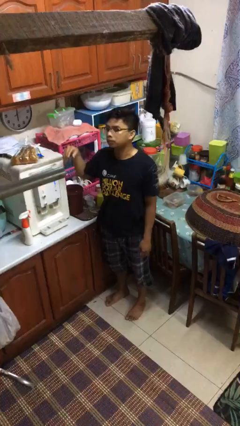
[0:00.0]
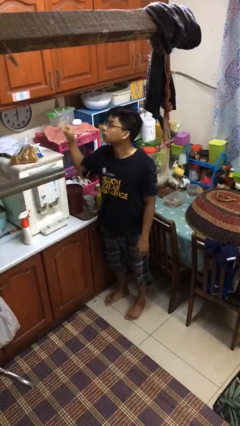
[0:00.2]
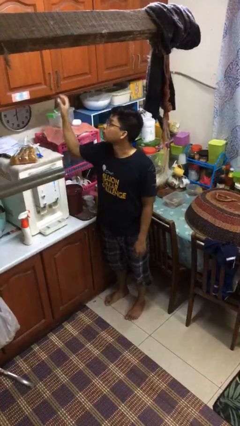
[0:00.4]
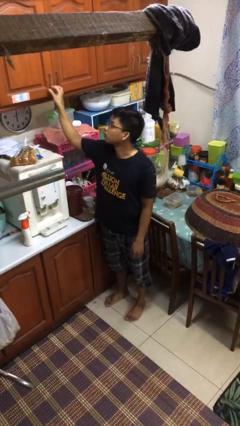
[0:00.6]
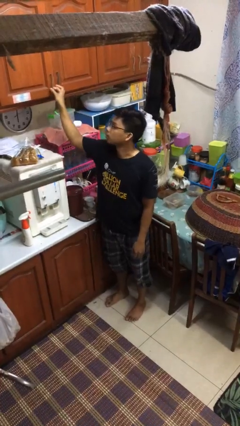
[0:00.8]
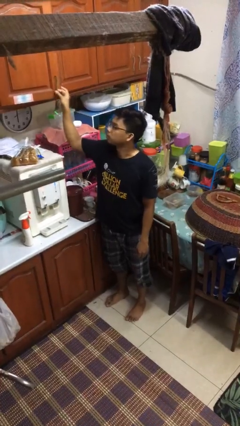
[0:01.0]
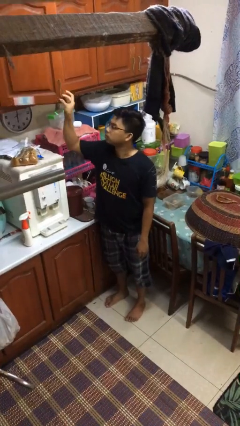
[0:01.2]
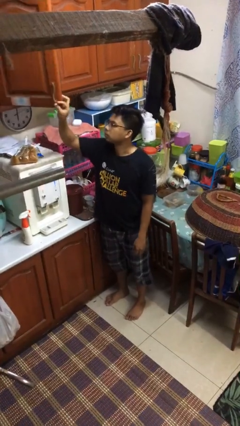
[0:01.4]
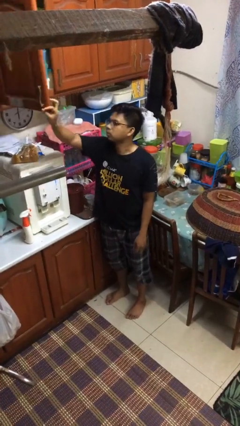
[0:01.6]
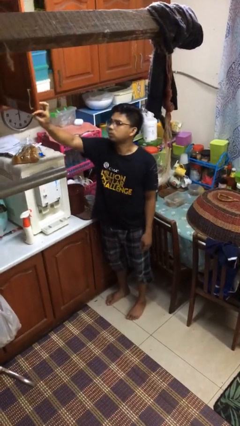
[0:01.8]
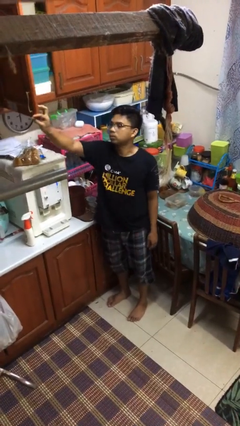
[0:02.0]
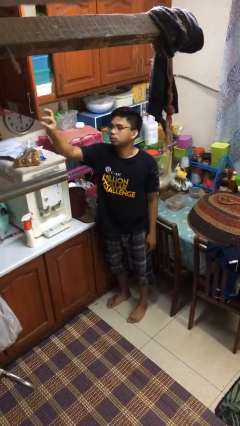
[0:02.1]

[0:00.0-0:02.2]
person opens kitchen drawer

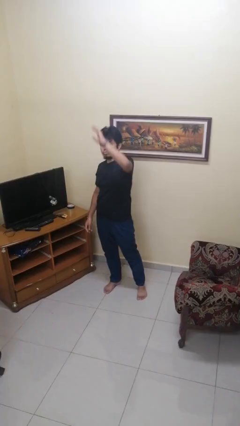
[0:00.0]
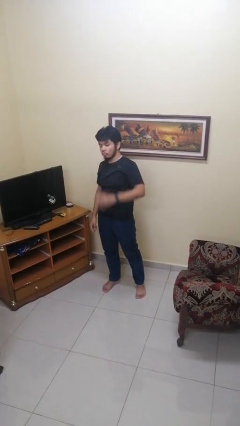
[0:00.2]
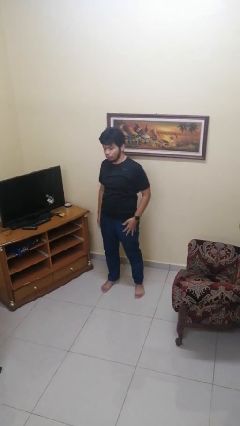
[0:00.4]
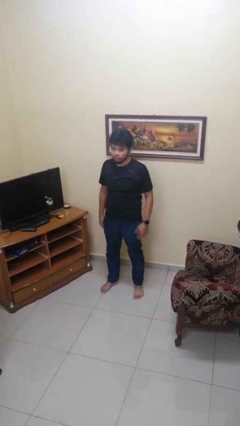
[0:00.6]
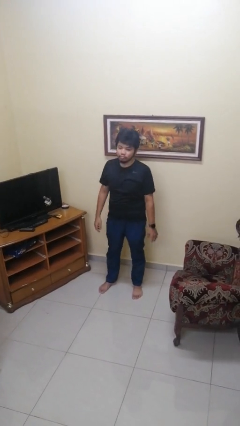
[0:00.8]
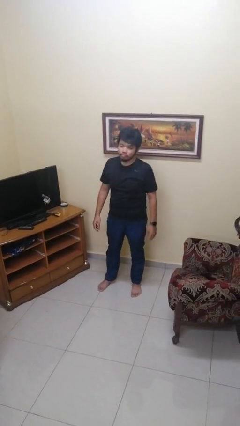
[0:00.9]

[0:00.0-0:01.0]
person gestures lower hand

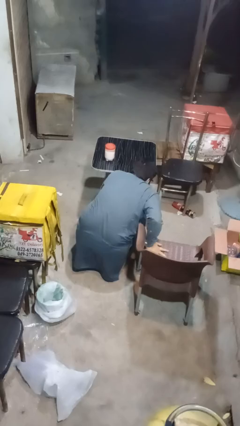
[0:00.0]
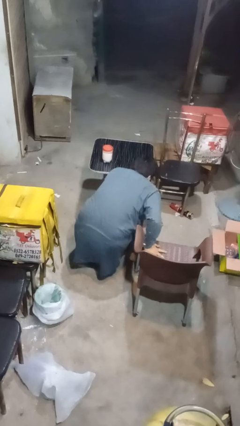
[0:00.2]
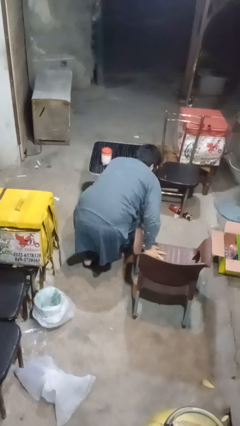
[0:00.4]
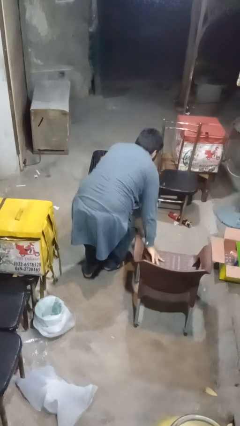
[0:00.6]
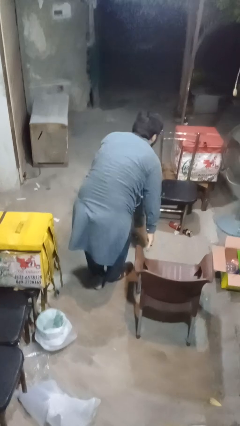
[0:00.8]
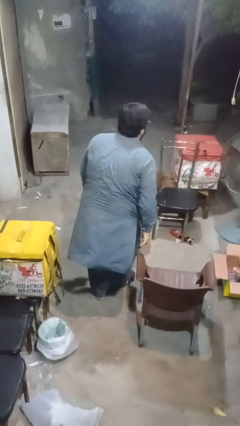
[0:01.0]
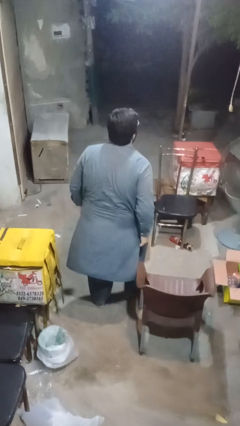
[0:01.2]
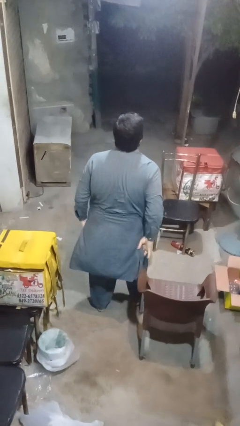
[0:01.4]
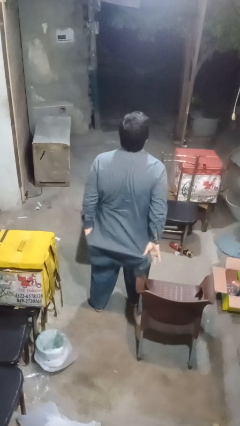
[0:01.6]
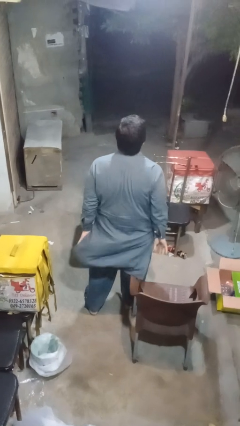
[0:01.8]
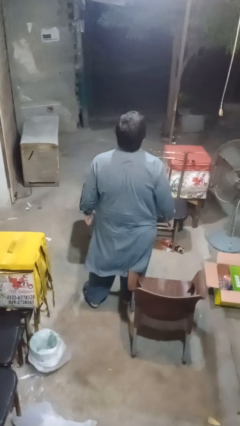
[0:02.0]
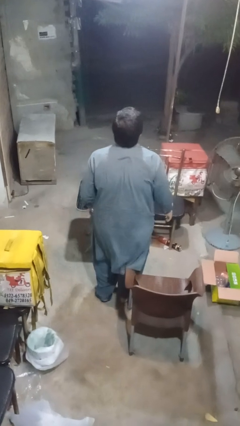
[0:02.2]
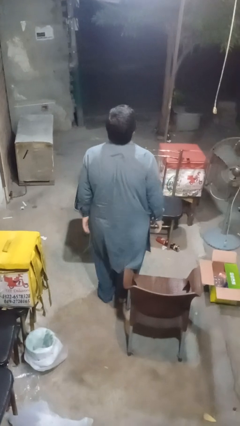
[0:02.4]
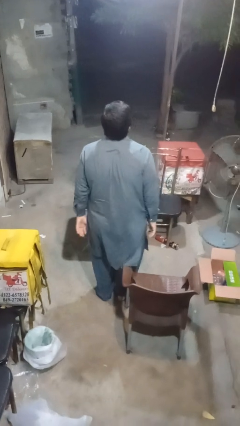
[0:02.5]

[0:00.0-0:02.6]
person stands up from floor

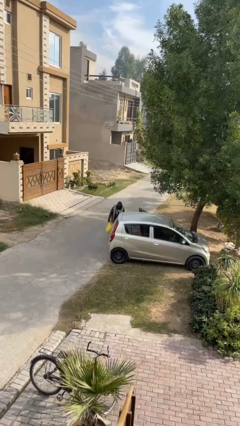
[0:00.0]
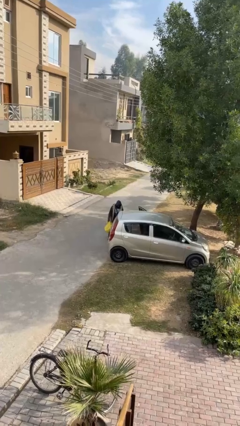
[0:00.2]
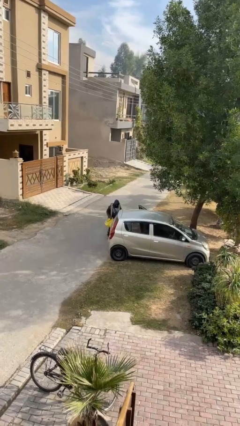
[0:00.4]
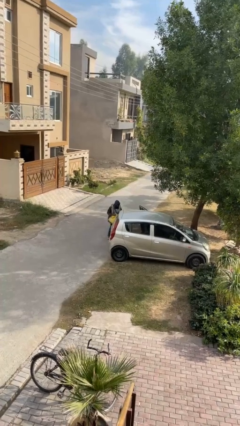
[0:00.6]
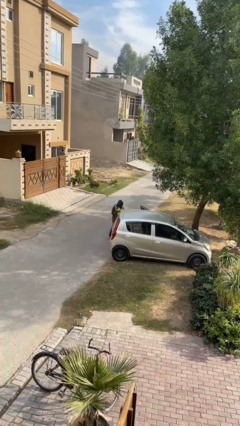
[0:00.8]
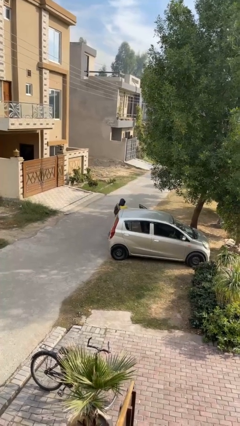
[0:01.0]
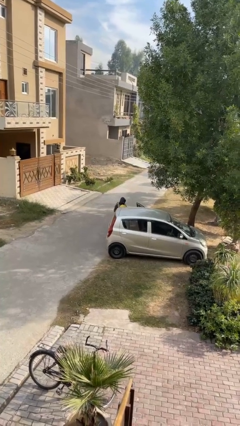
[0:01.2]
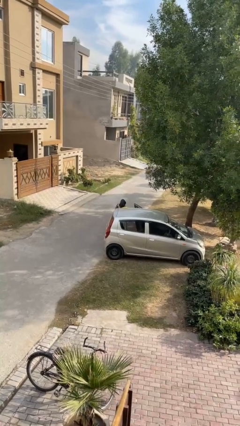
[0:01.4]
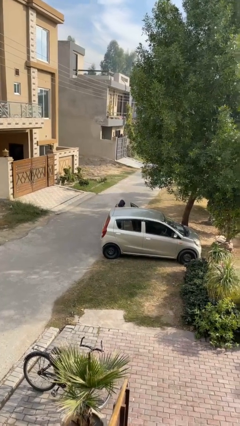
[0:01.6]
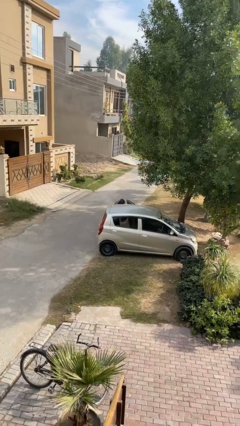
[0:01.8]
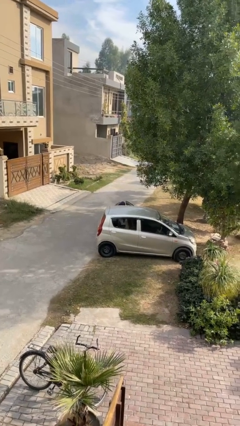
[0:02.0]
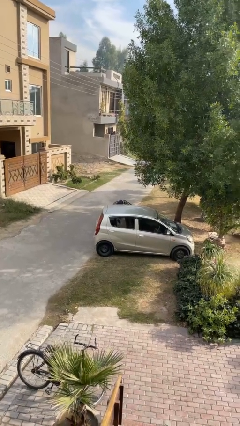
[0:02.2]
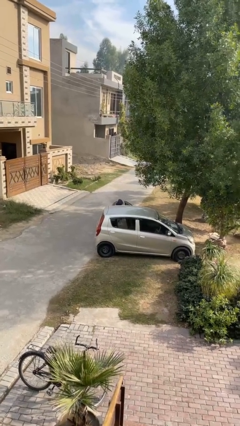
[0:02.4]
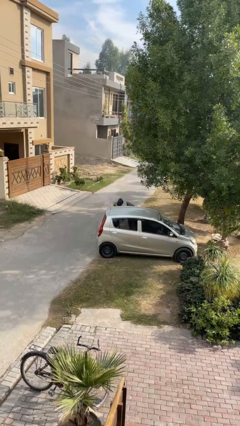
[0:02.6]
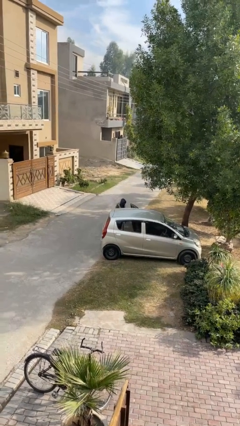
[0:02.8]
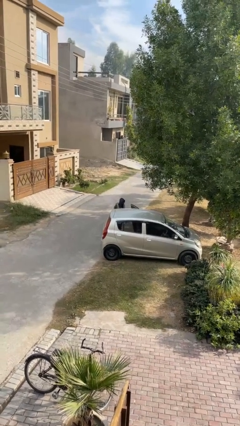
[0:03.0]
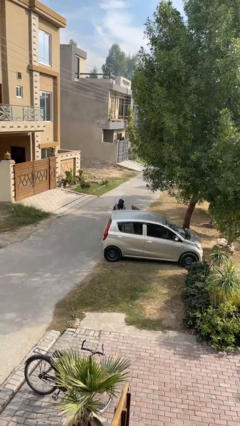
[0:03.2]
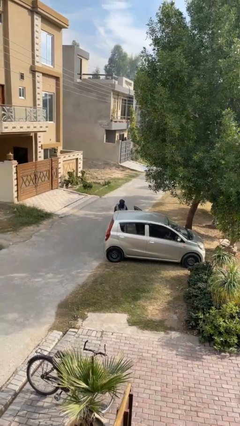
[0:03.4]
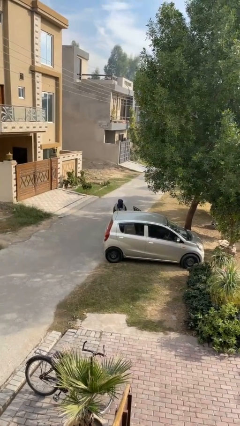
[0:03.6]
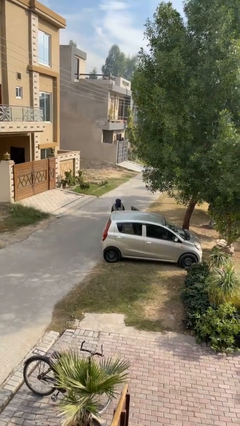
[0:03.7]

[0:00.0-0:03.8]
person loads car

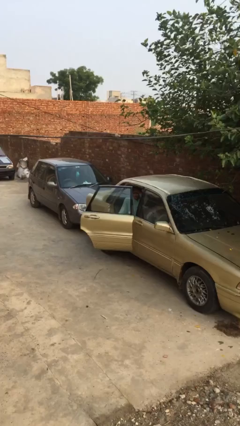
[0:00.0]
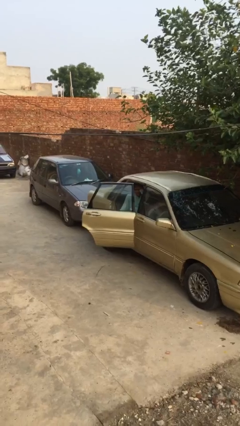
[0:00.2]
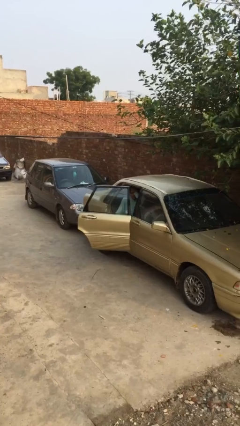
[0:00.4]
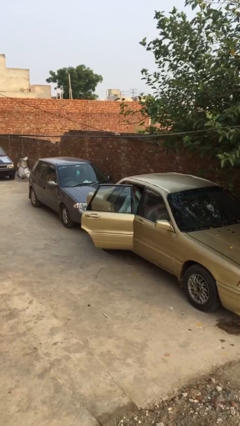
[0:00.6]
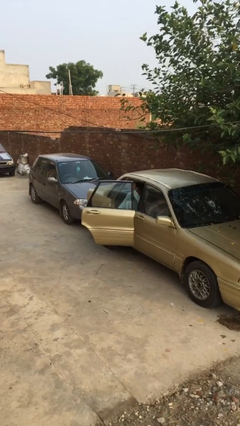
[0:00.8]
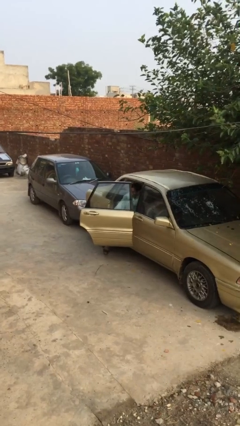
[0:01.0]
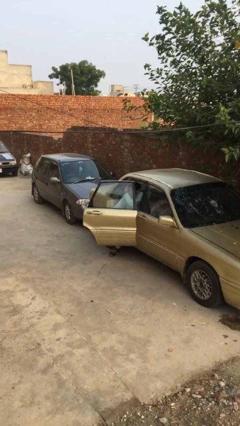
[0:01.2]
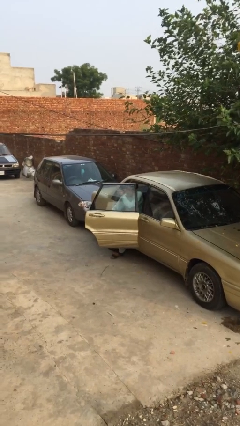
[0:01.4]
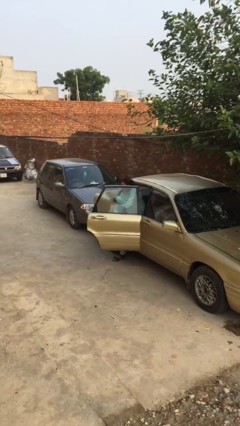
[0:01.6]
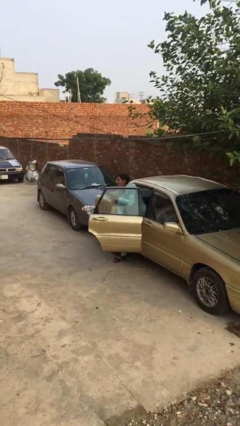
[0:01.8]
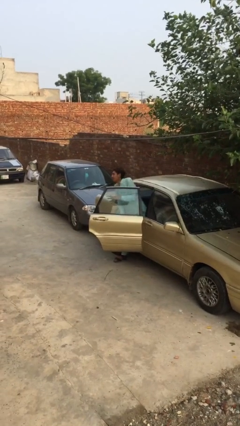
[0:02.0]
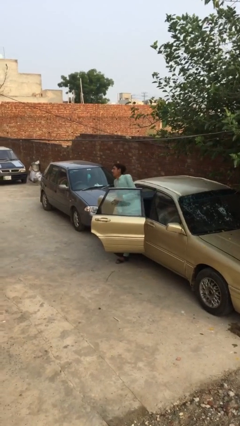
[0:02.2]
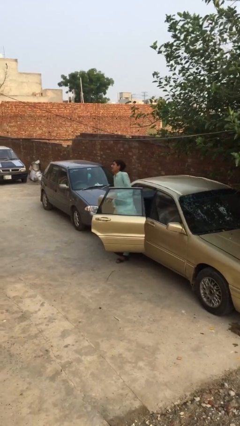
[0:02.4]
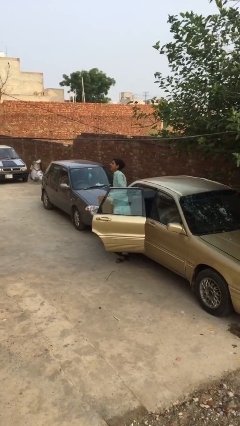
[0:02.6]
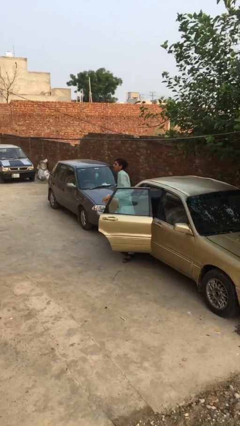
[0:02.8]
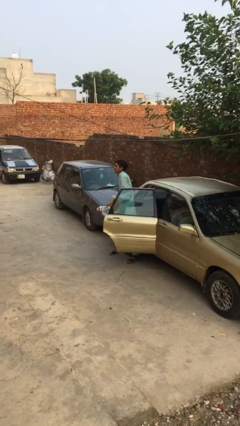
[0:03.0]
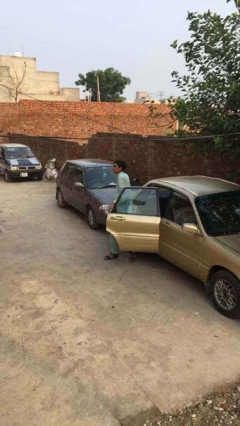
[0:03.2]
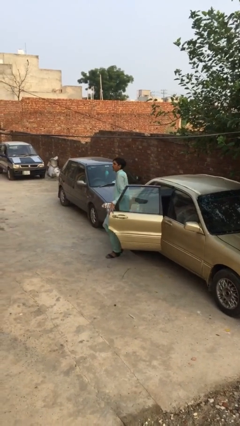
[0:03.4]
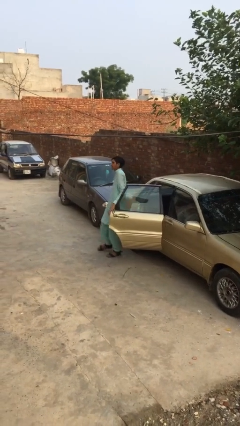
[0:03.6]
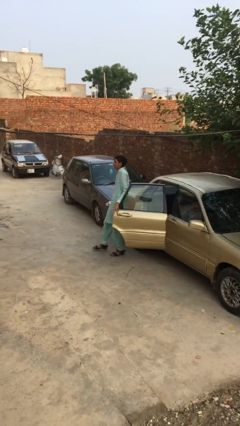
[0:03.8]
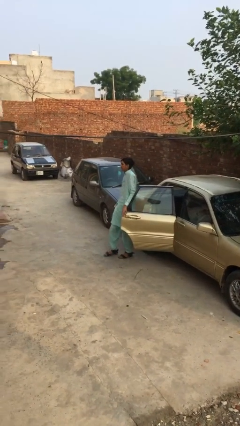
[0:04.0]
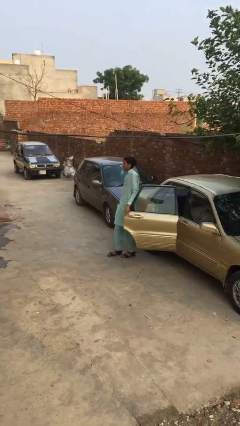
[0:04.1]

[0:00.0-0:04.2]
person exits car

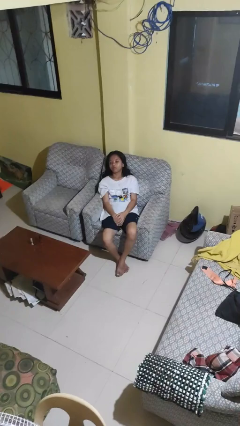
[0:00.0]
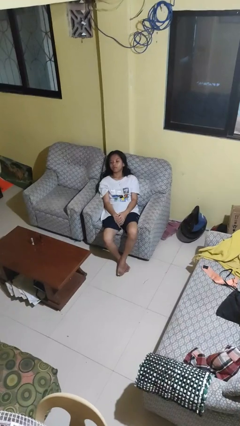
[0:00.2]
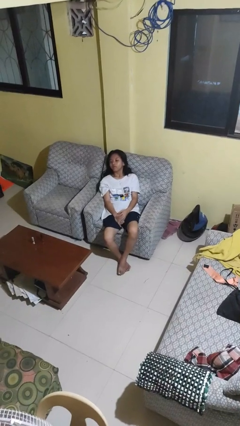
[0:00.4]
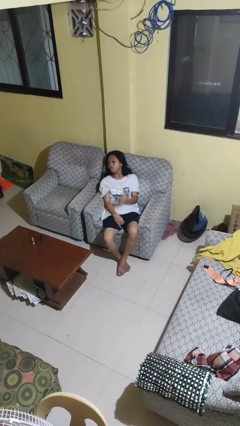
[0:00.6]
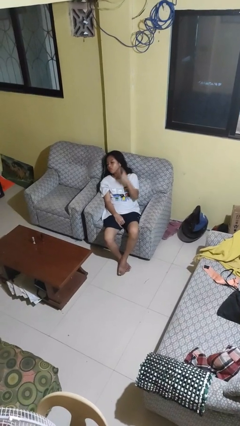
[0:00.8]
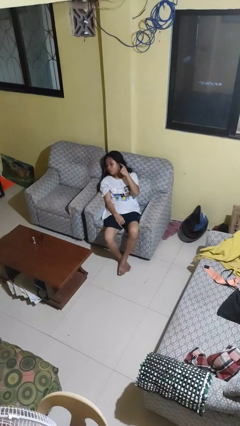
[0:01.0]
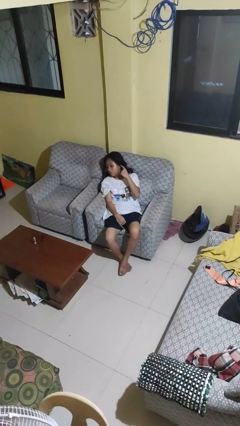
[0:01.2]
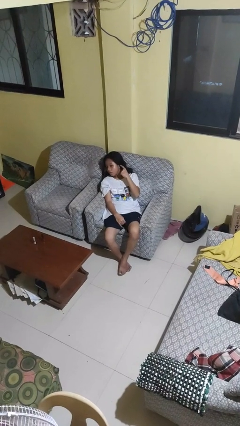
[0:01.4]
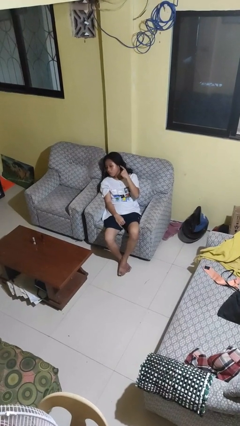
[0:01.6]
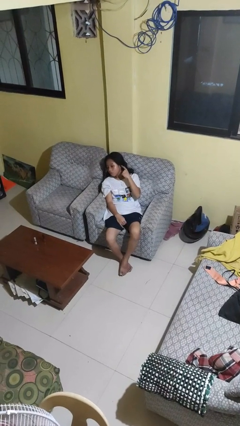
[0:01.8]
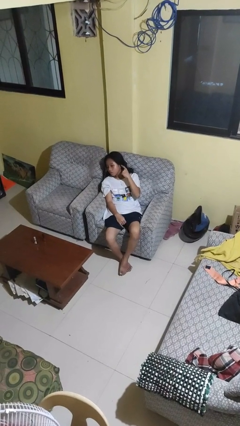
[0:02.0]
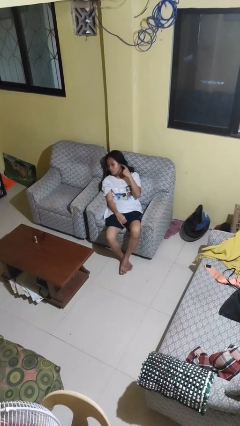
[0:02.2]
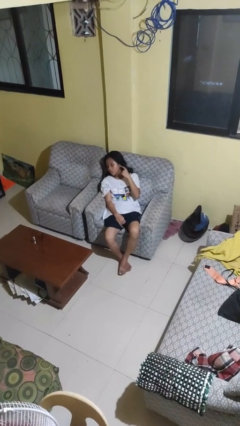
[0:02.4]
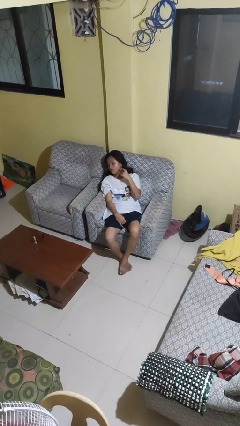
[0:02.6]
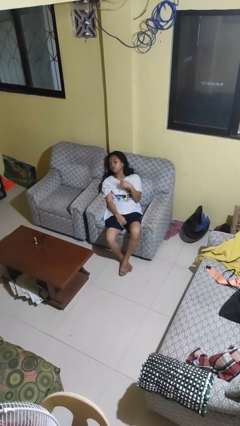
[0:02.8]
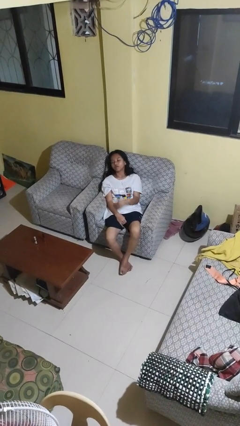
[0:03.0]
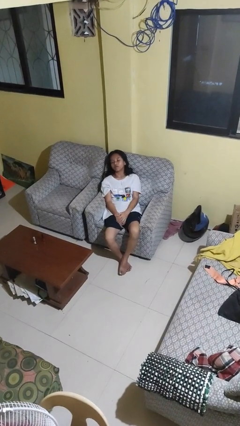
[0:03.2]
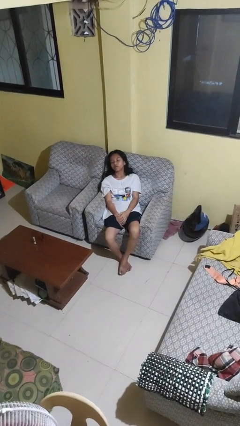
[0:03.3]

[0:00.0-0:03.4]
person gestures listen closely

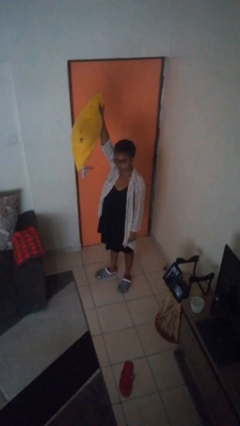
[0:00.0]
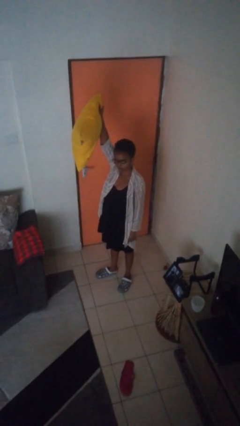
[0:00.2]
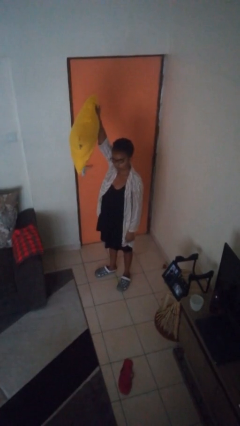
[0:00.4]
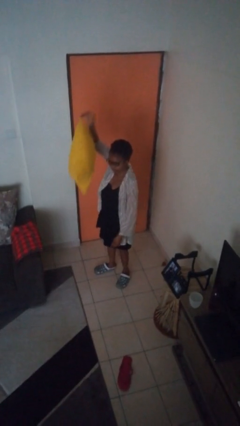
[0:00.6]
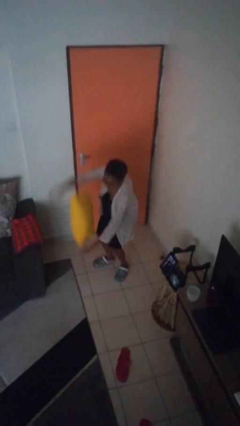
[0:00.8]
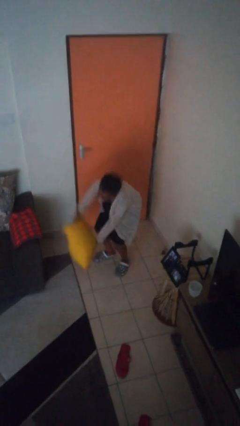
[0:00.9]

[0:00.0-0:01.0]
person drops object
